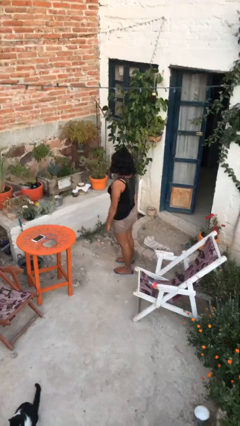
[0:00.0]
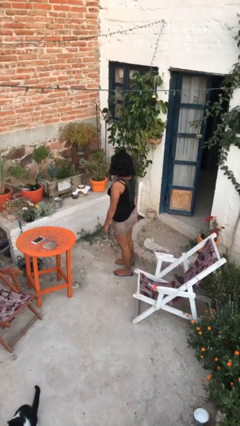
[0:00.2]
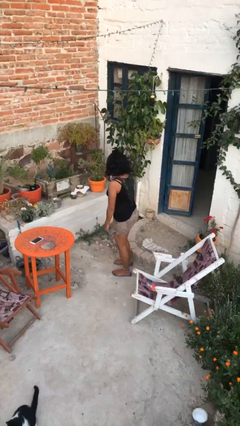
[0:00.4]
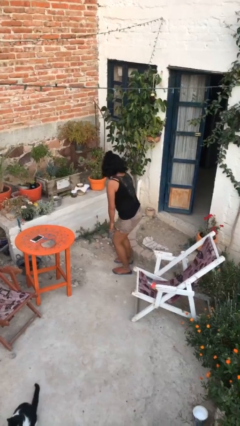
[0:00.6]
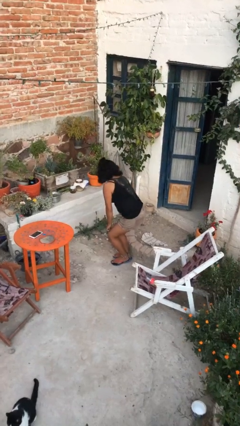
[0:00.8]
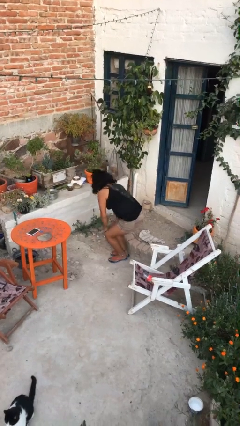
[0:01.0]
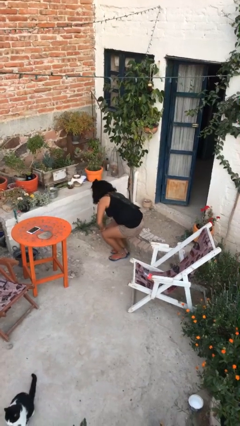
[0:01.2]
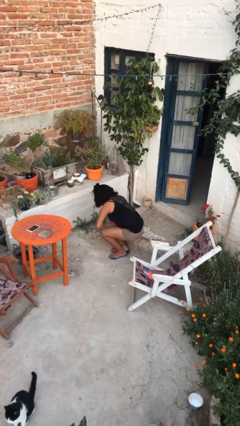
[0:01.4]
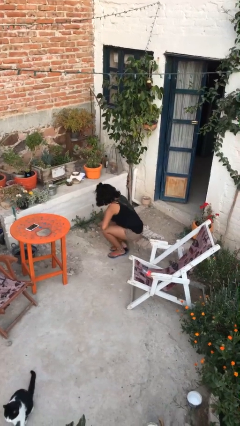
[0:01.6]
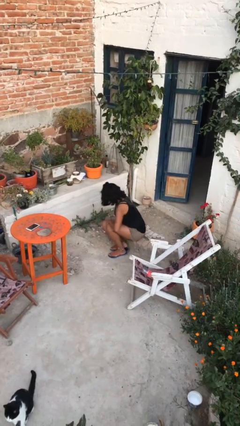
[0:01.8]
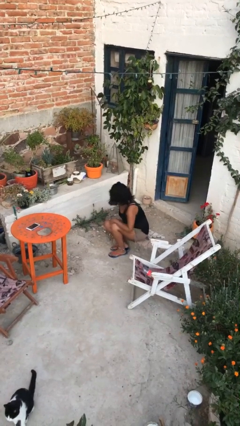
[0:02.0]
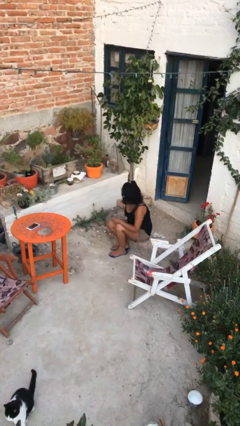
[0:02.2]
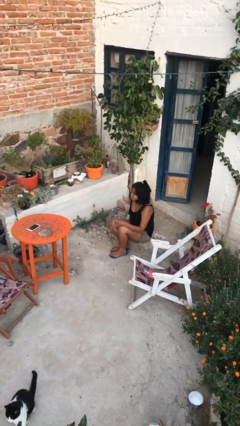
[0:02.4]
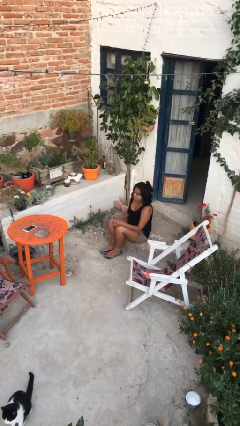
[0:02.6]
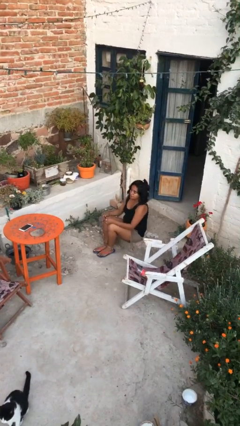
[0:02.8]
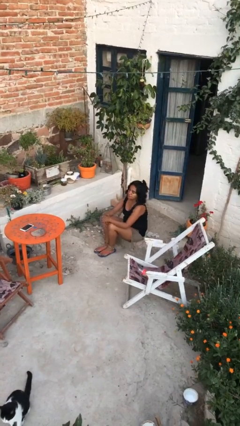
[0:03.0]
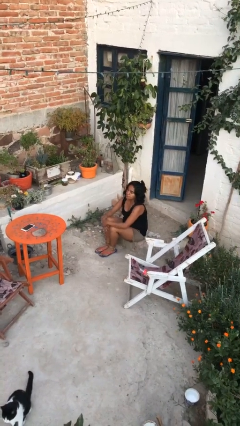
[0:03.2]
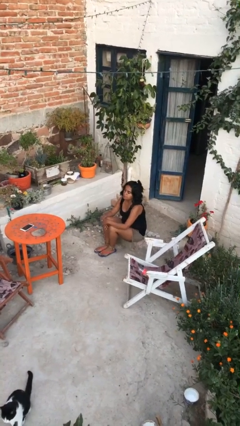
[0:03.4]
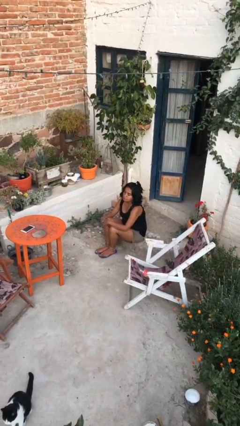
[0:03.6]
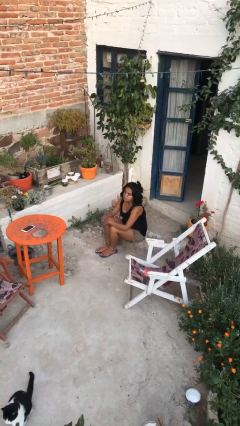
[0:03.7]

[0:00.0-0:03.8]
person sits down

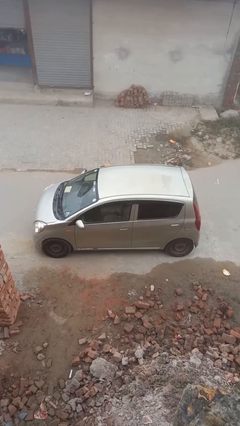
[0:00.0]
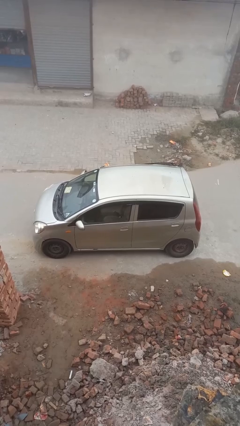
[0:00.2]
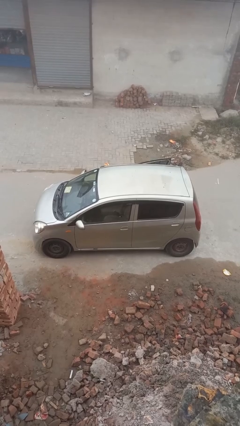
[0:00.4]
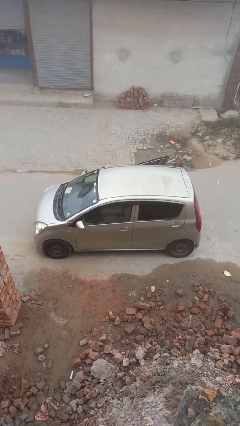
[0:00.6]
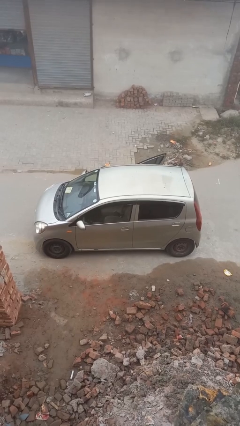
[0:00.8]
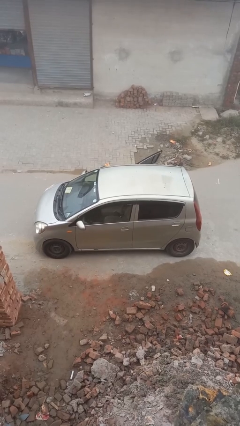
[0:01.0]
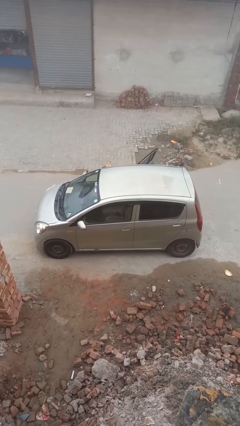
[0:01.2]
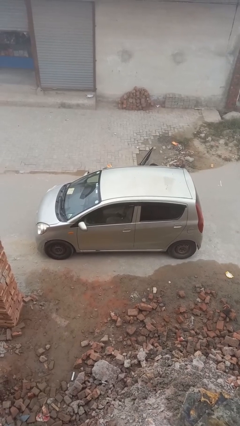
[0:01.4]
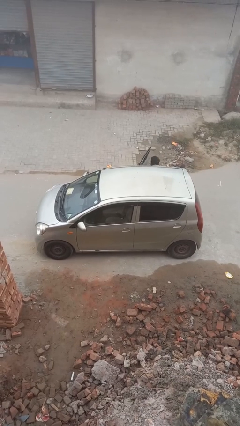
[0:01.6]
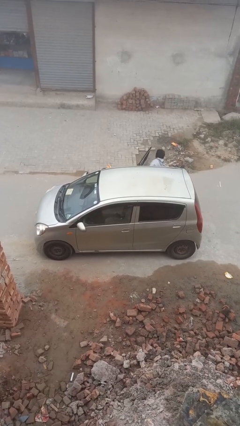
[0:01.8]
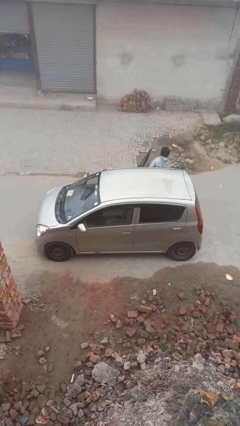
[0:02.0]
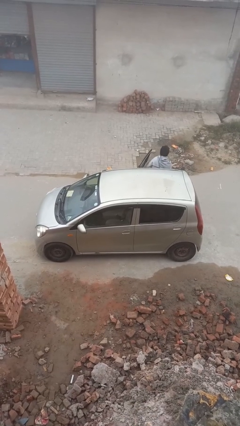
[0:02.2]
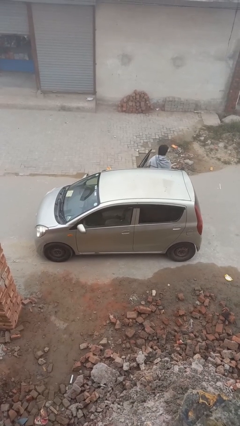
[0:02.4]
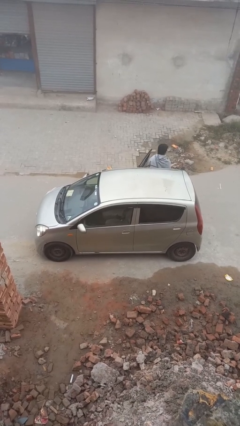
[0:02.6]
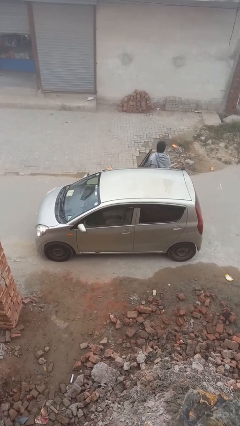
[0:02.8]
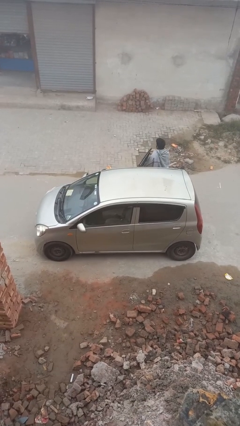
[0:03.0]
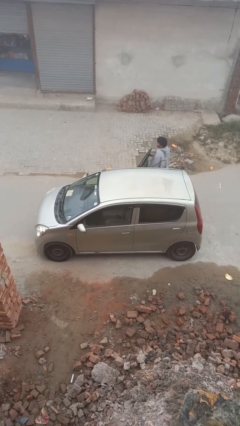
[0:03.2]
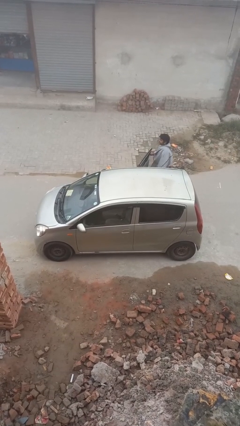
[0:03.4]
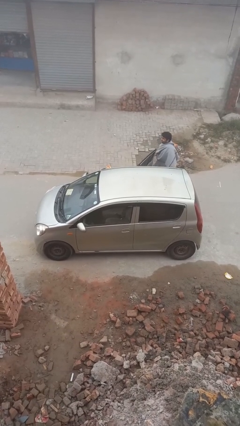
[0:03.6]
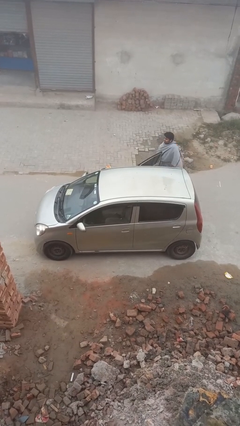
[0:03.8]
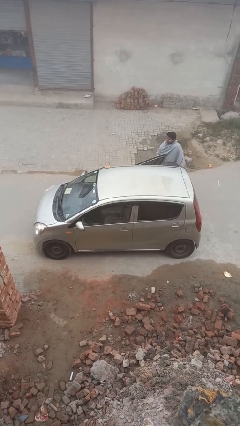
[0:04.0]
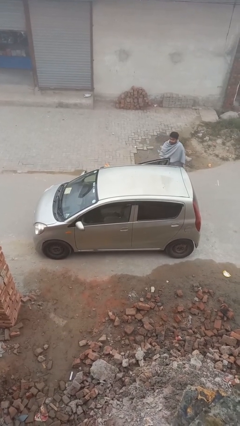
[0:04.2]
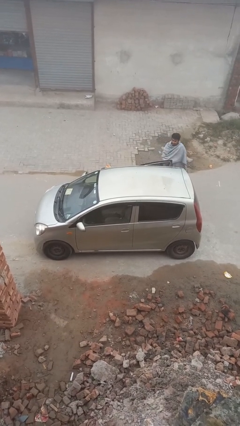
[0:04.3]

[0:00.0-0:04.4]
car drops off person

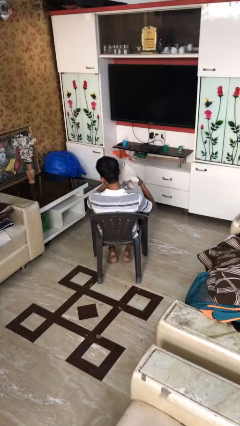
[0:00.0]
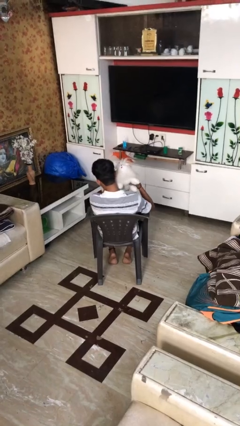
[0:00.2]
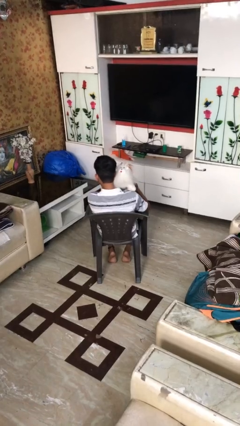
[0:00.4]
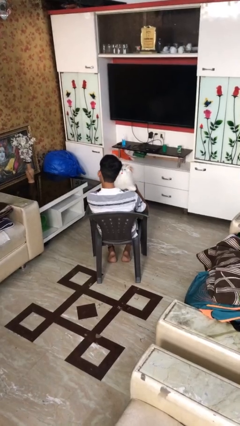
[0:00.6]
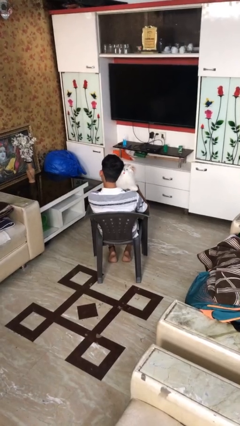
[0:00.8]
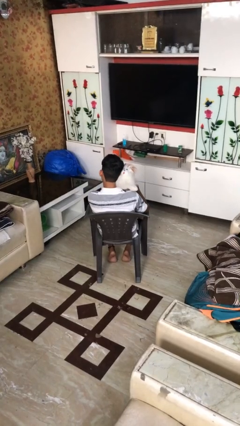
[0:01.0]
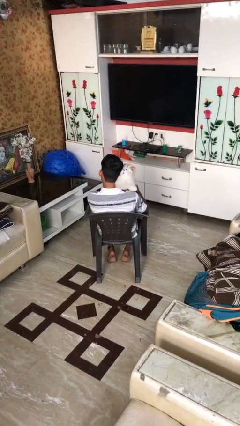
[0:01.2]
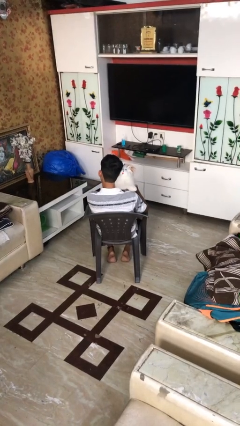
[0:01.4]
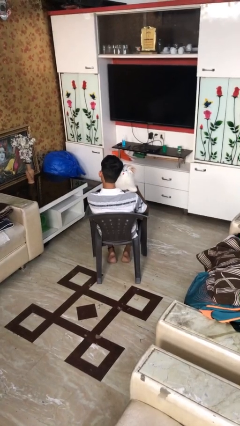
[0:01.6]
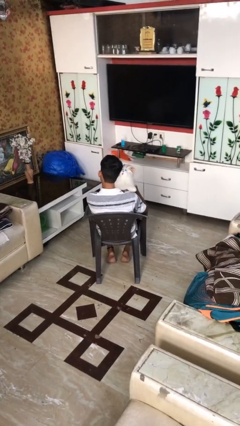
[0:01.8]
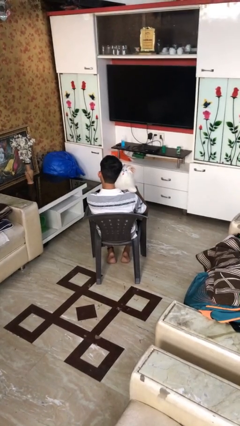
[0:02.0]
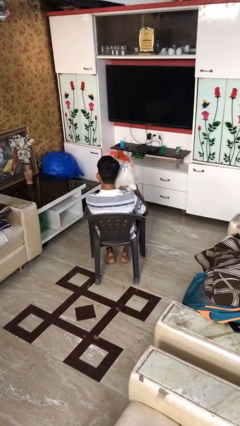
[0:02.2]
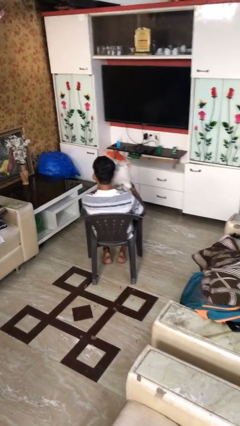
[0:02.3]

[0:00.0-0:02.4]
person hugs stuffed animal

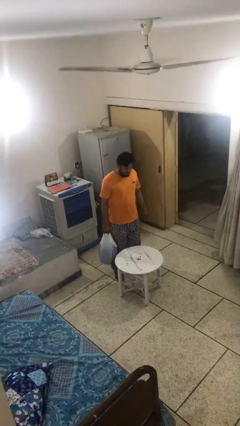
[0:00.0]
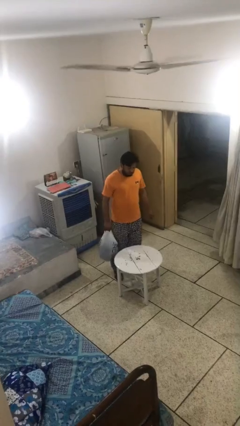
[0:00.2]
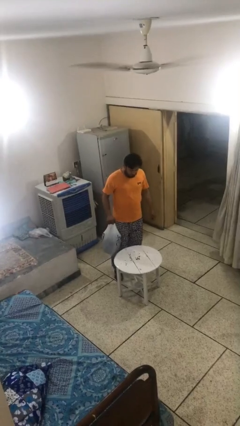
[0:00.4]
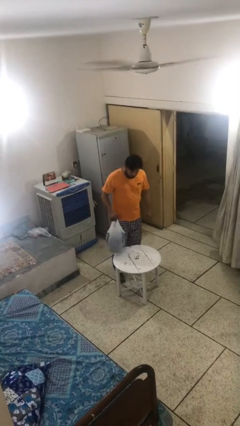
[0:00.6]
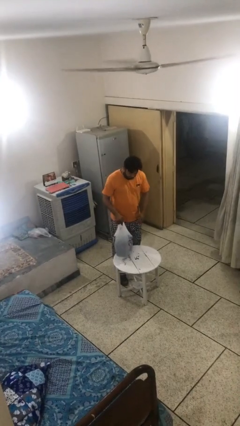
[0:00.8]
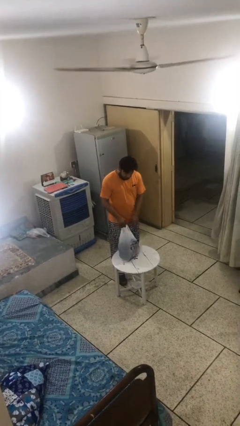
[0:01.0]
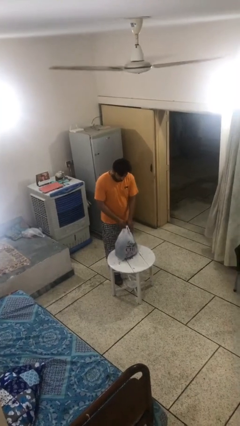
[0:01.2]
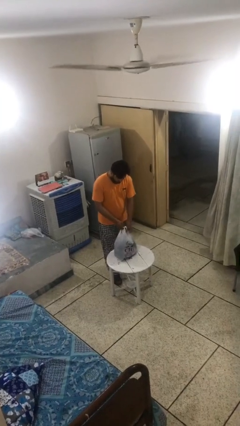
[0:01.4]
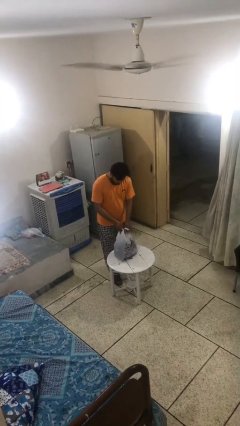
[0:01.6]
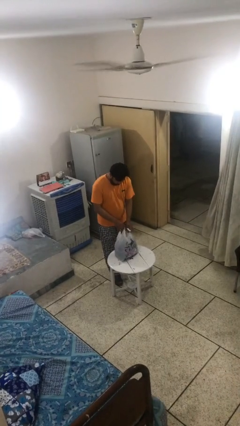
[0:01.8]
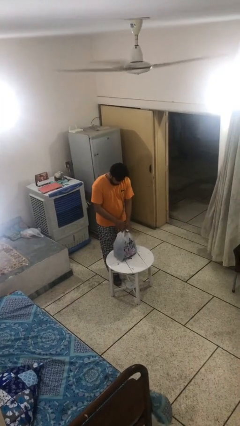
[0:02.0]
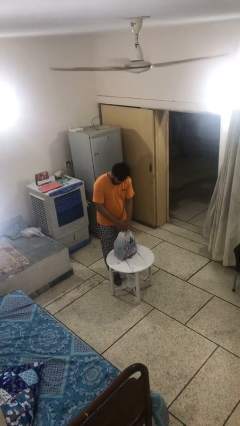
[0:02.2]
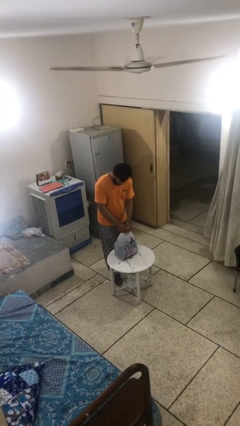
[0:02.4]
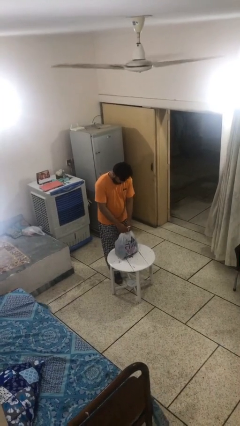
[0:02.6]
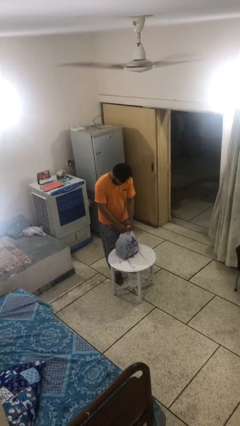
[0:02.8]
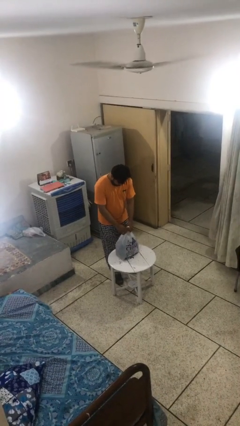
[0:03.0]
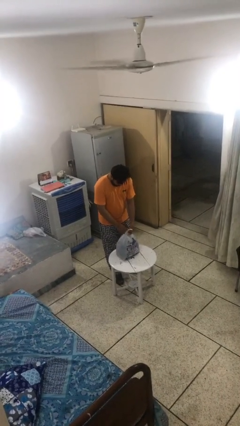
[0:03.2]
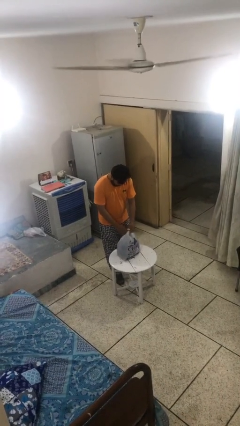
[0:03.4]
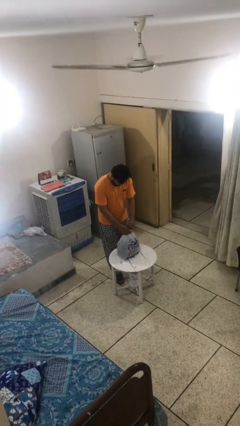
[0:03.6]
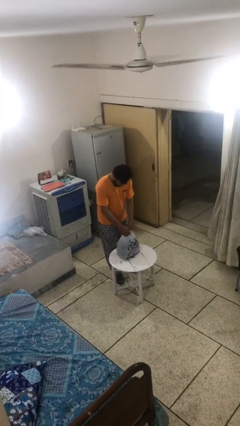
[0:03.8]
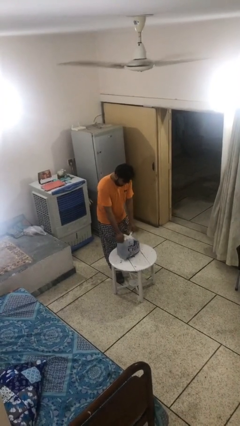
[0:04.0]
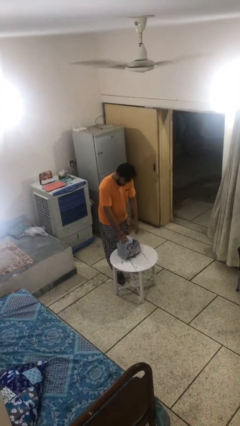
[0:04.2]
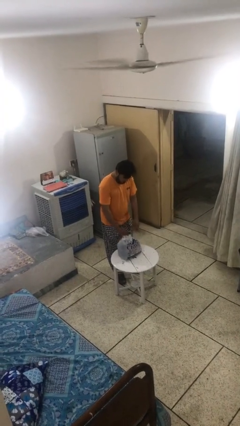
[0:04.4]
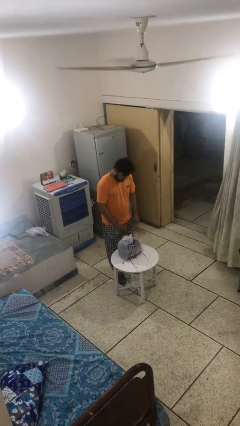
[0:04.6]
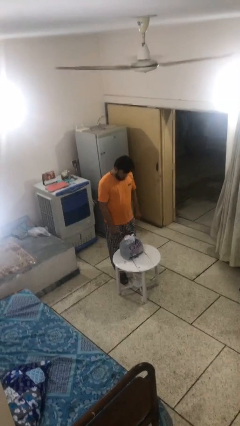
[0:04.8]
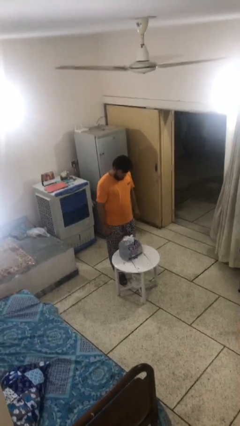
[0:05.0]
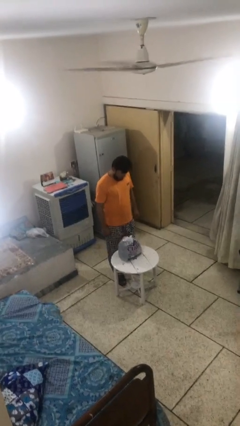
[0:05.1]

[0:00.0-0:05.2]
person puts down object on table

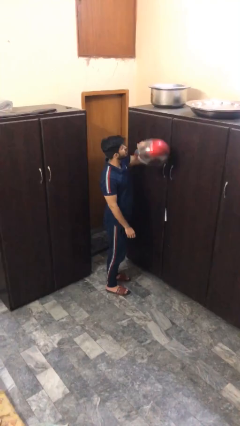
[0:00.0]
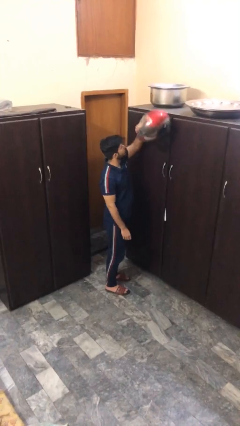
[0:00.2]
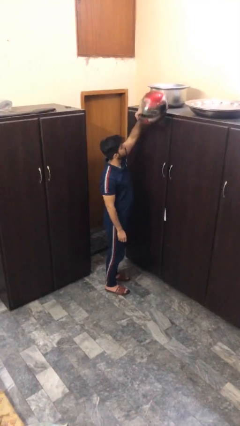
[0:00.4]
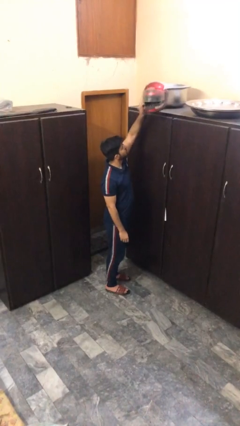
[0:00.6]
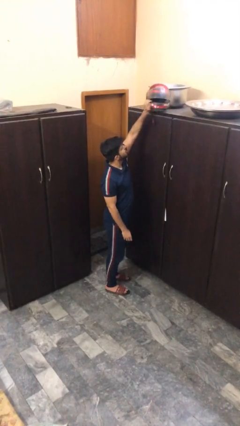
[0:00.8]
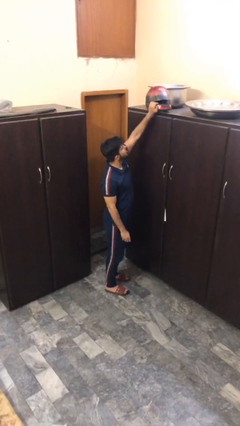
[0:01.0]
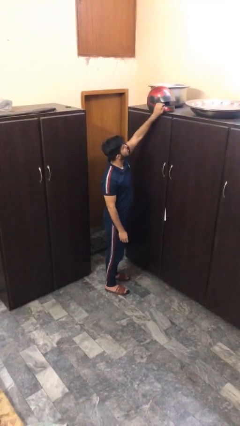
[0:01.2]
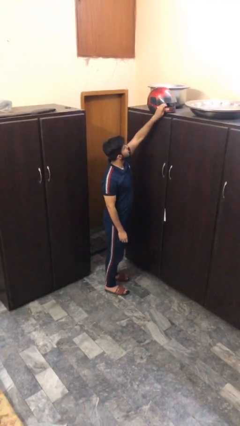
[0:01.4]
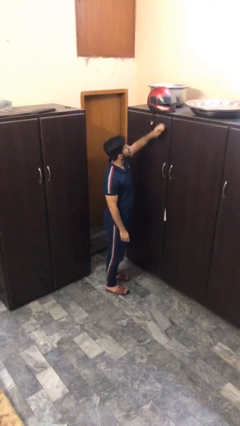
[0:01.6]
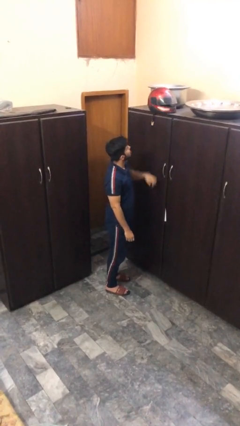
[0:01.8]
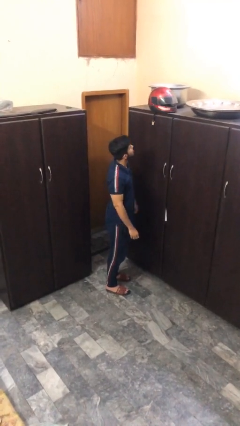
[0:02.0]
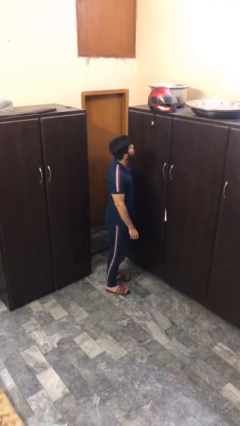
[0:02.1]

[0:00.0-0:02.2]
person puts down object on shelf
